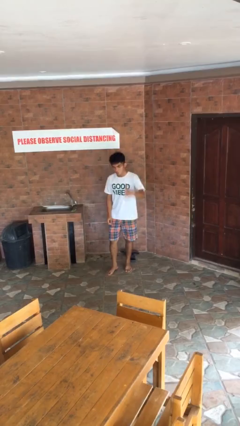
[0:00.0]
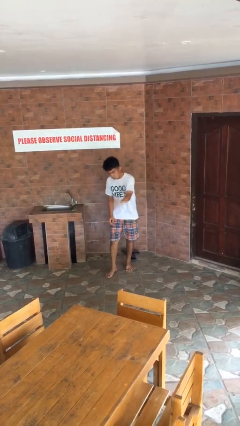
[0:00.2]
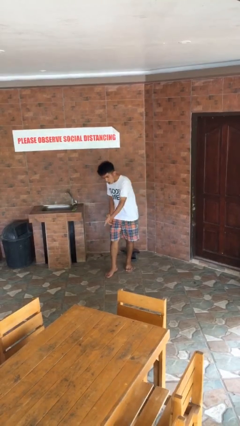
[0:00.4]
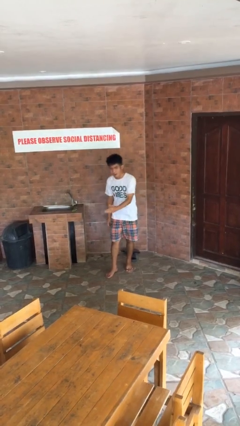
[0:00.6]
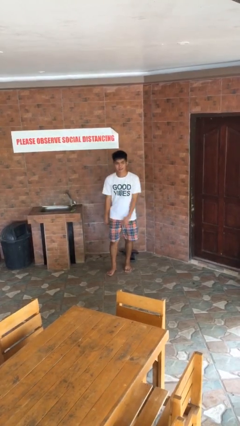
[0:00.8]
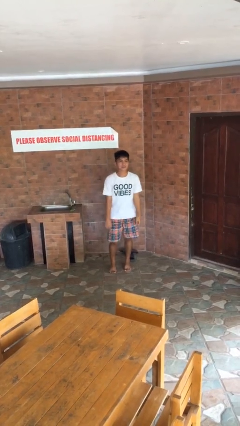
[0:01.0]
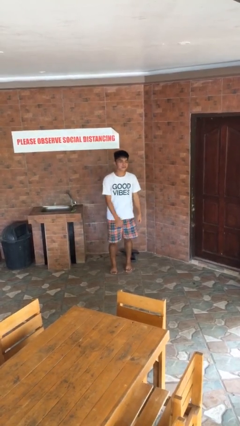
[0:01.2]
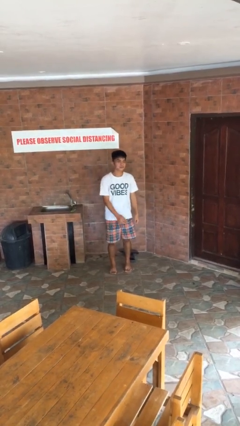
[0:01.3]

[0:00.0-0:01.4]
person karate chop

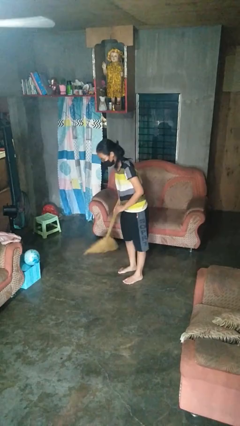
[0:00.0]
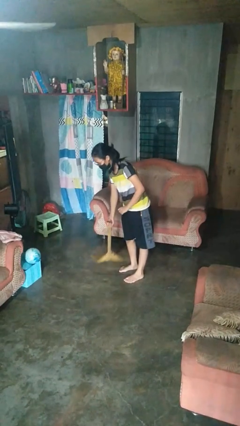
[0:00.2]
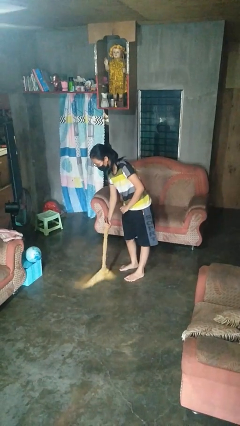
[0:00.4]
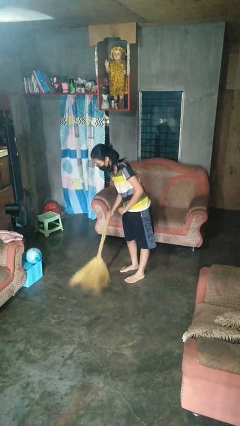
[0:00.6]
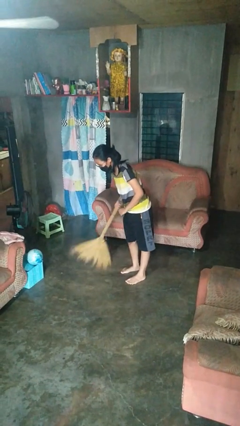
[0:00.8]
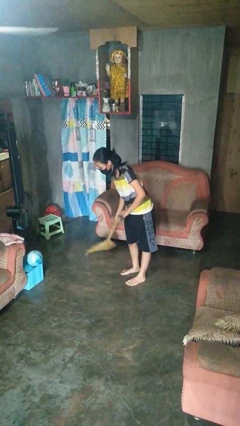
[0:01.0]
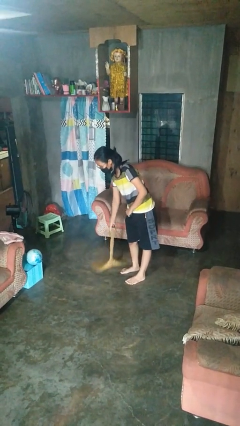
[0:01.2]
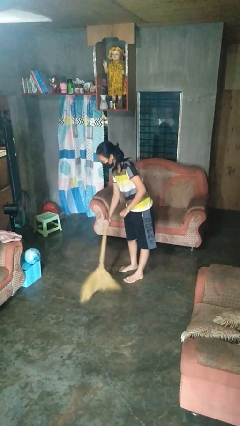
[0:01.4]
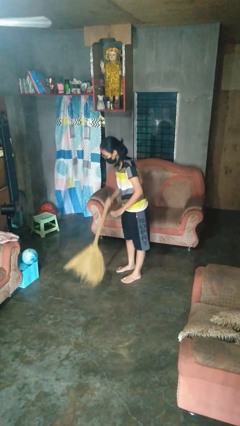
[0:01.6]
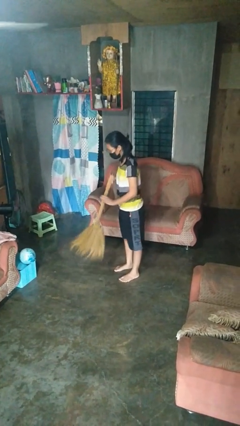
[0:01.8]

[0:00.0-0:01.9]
person sweeps floor

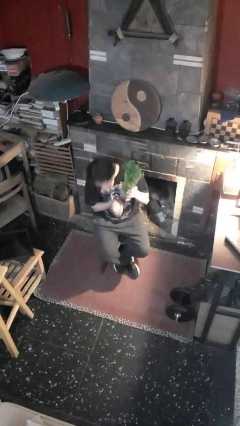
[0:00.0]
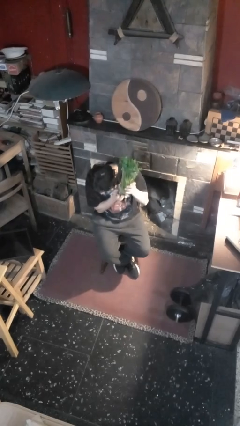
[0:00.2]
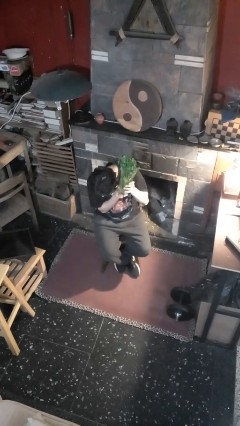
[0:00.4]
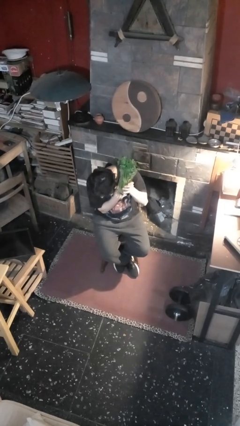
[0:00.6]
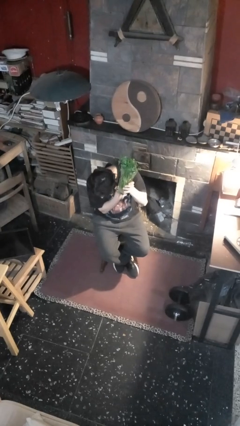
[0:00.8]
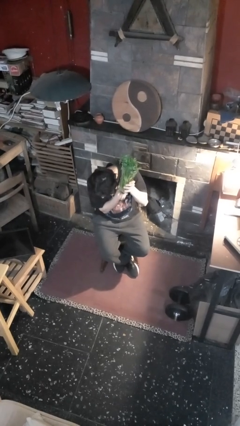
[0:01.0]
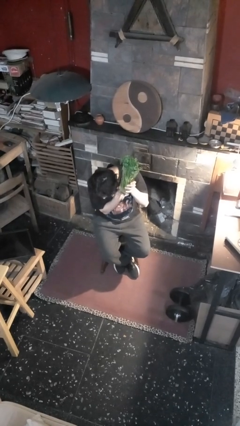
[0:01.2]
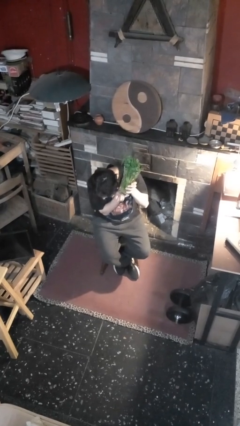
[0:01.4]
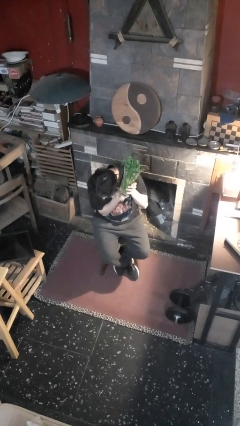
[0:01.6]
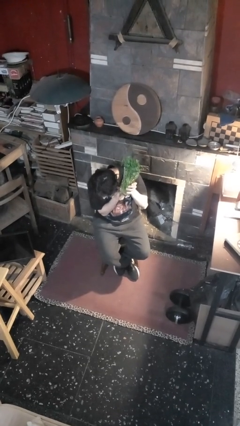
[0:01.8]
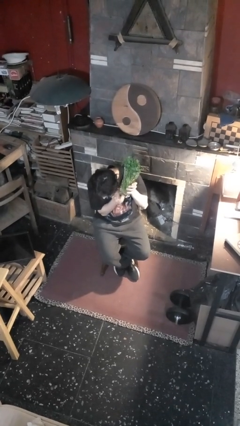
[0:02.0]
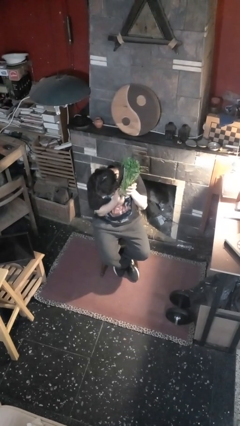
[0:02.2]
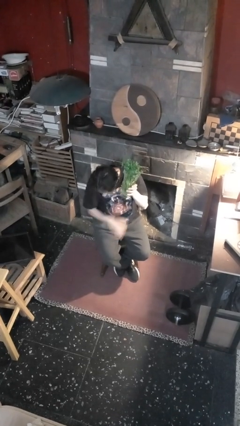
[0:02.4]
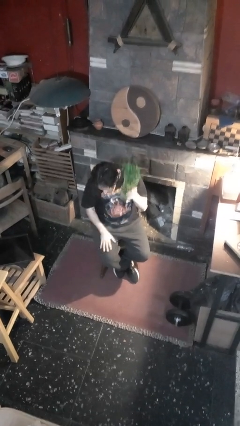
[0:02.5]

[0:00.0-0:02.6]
person taps object with finger

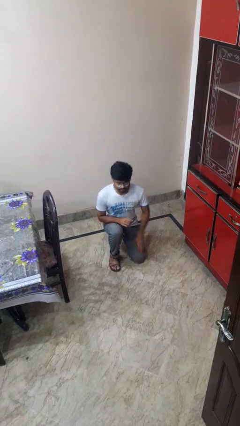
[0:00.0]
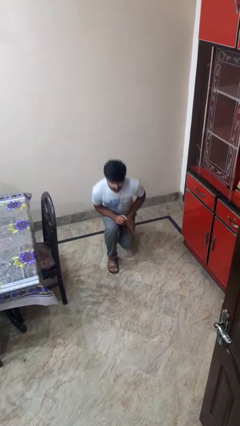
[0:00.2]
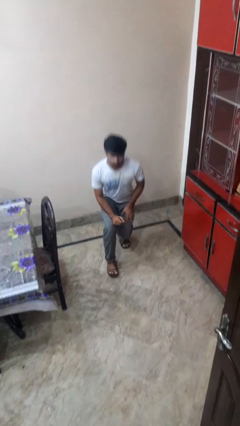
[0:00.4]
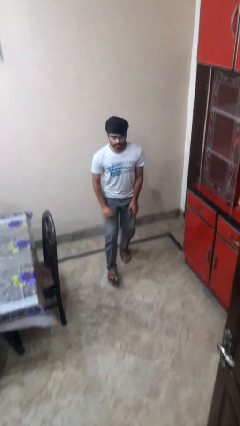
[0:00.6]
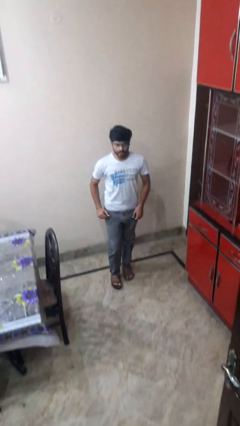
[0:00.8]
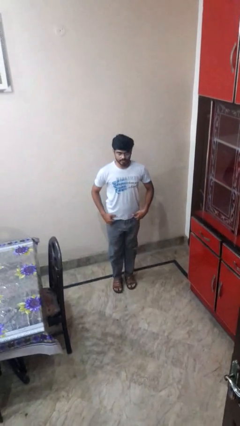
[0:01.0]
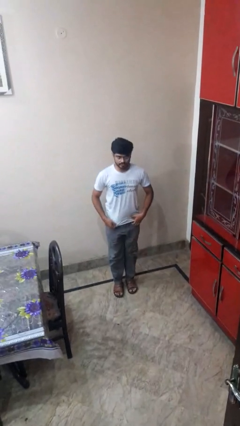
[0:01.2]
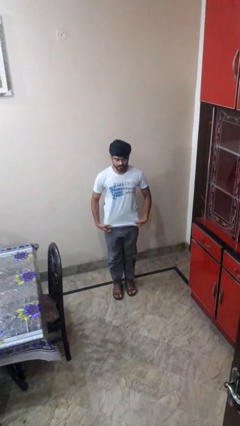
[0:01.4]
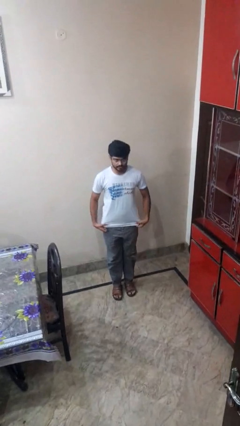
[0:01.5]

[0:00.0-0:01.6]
person stands up from floor

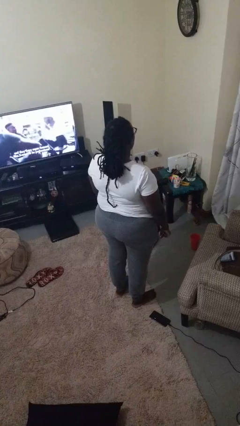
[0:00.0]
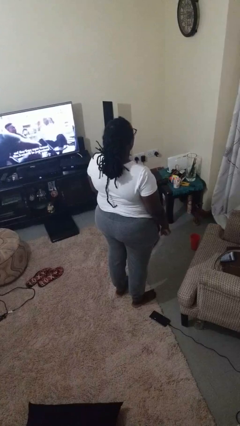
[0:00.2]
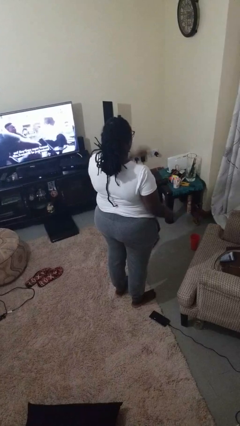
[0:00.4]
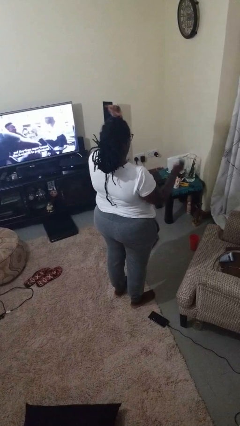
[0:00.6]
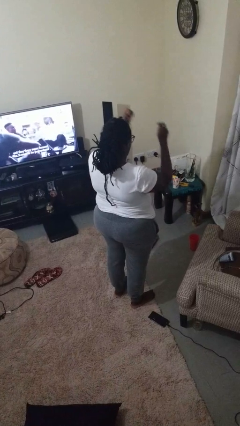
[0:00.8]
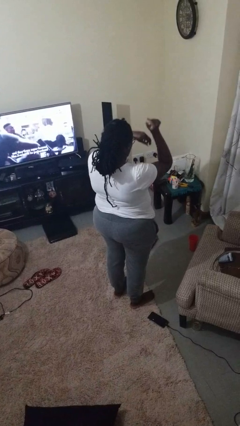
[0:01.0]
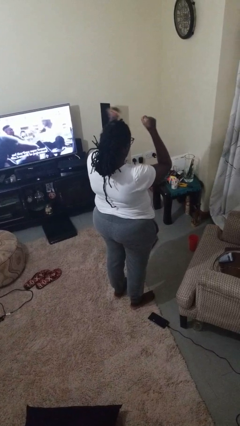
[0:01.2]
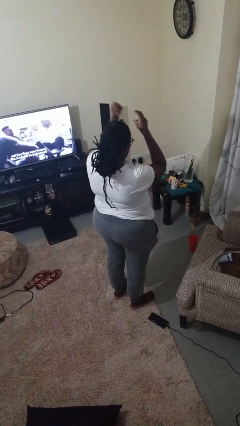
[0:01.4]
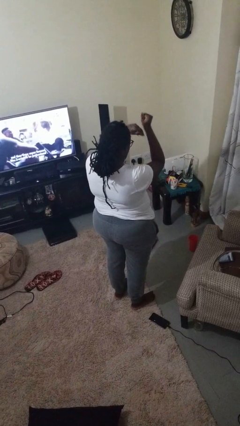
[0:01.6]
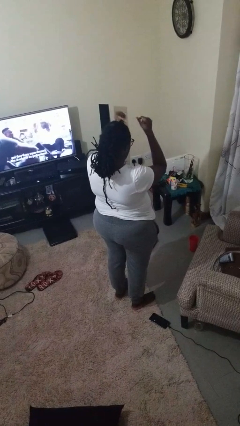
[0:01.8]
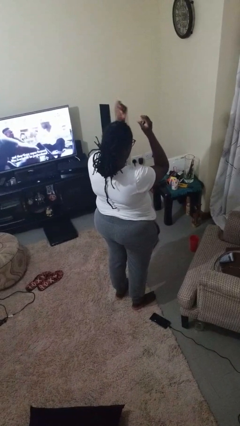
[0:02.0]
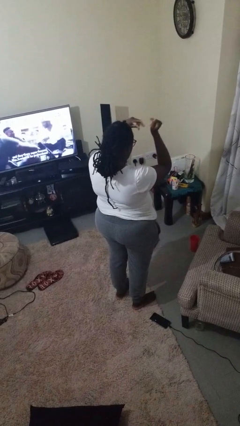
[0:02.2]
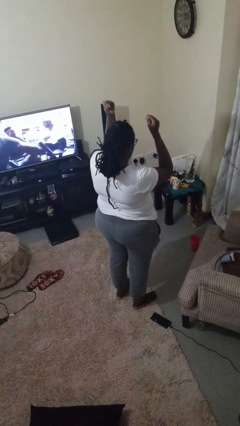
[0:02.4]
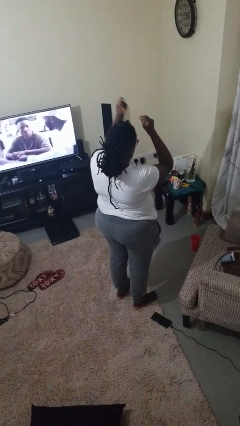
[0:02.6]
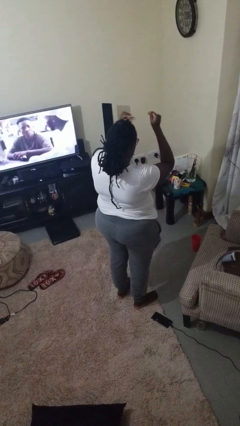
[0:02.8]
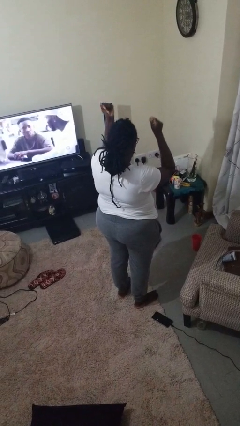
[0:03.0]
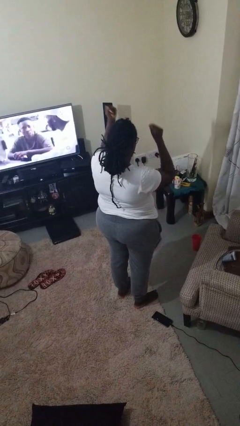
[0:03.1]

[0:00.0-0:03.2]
person snaps fingers

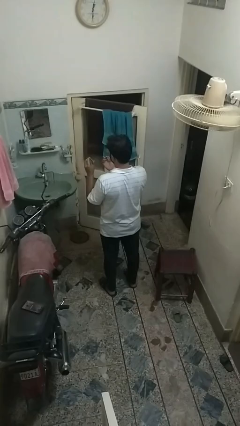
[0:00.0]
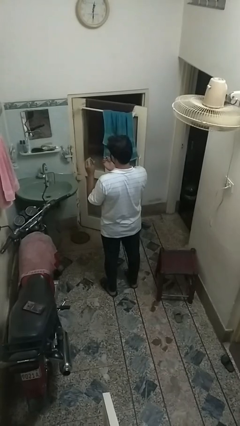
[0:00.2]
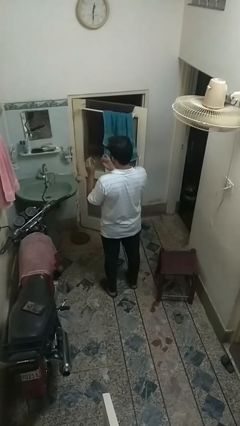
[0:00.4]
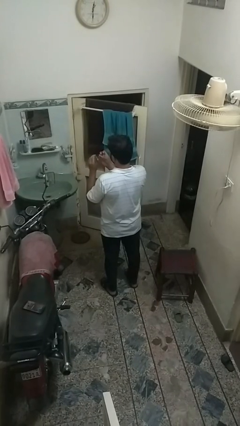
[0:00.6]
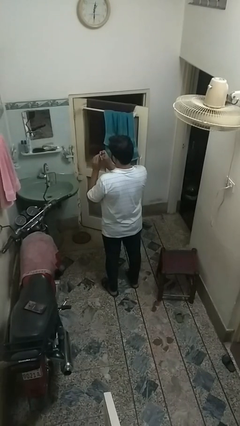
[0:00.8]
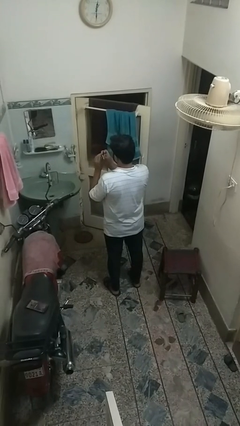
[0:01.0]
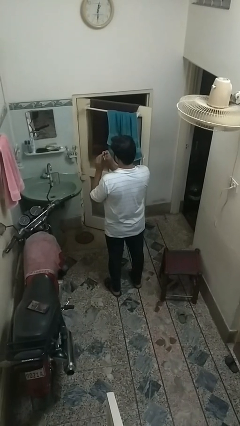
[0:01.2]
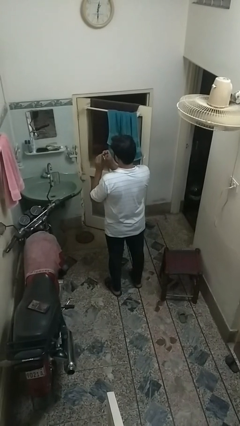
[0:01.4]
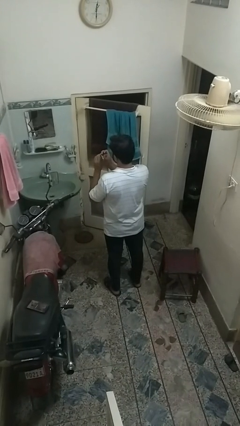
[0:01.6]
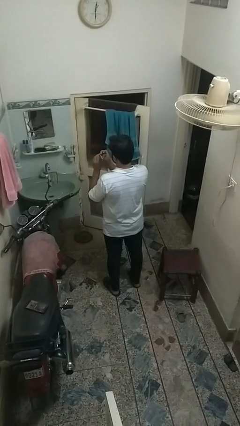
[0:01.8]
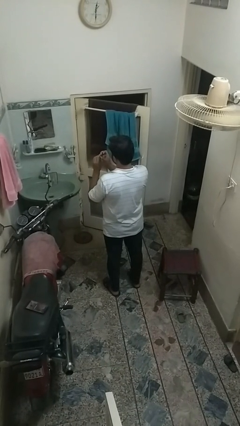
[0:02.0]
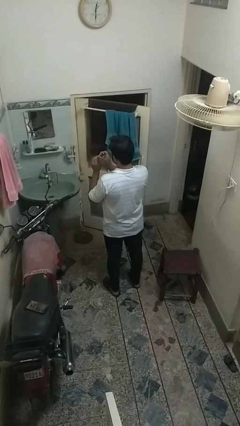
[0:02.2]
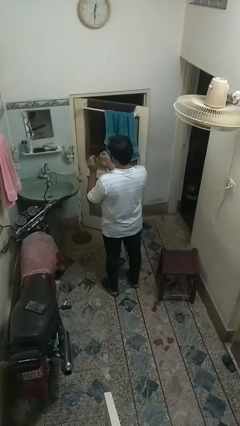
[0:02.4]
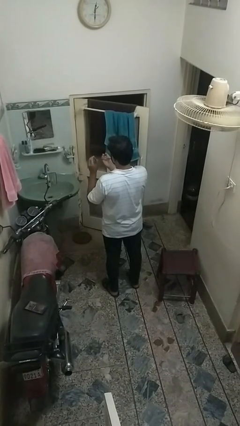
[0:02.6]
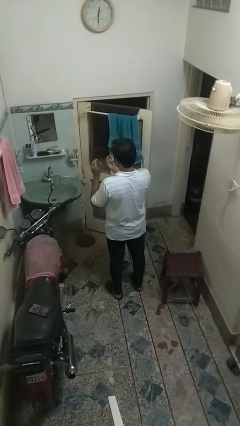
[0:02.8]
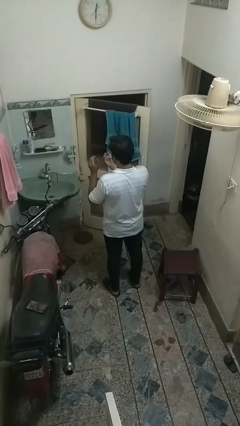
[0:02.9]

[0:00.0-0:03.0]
person clips fingernails

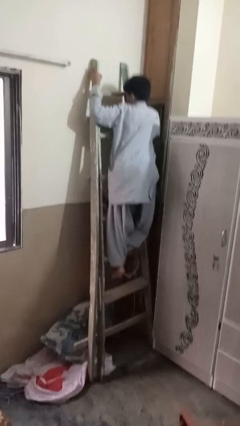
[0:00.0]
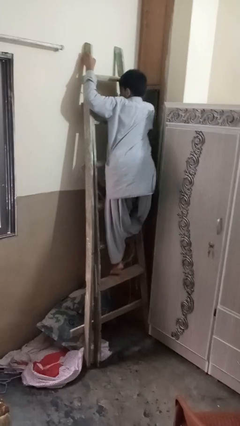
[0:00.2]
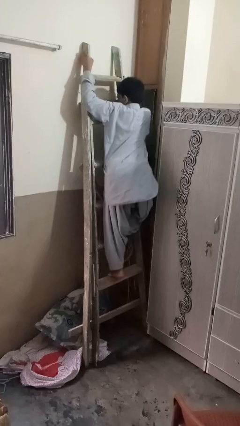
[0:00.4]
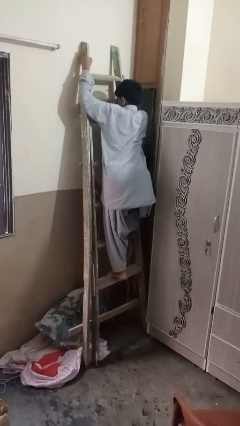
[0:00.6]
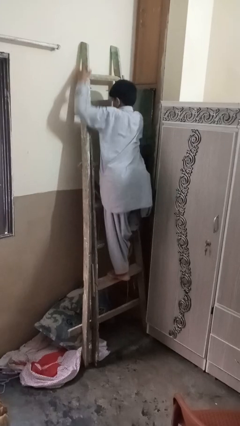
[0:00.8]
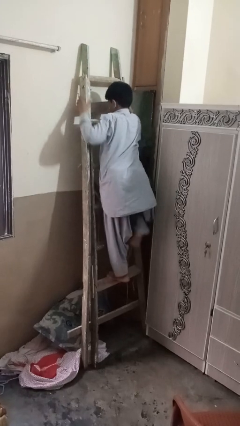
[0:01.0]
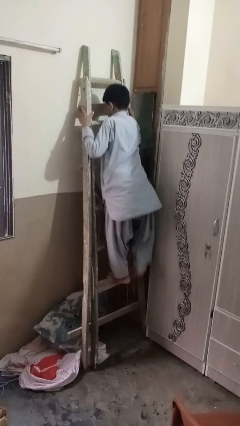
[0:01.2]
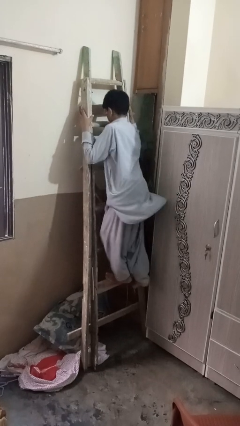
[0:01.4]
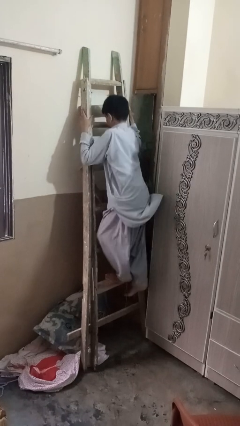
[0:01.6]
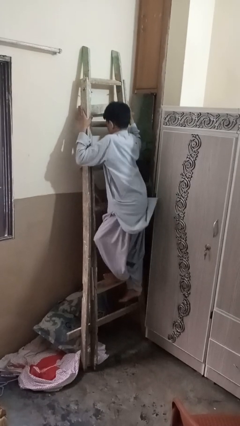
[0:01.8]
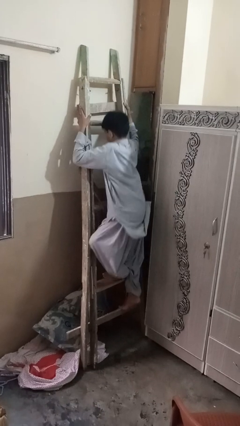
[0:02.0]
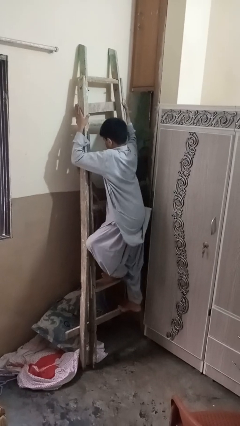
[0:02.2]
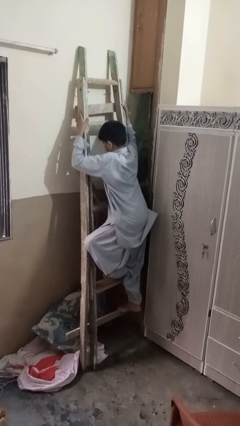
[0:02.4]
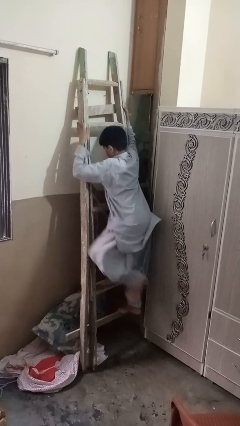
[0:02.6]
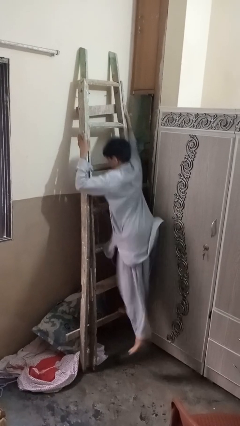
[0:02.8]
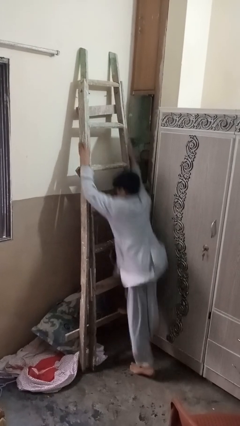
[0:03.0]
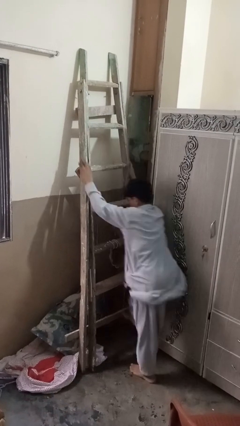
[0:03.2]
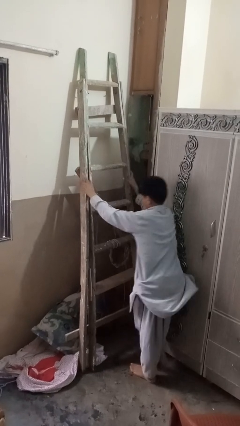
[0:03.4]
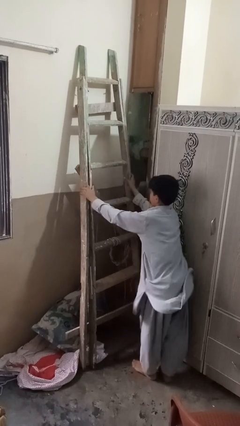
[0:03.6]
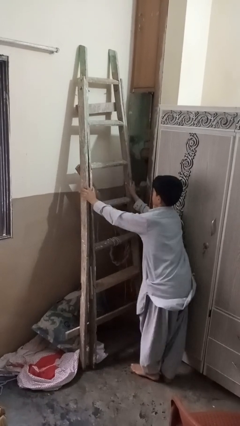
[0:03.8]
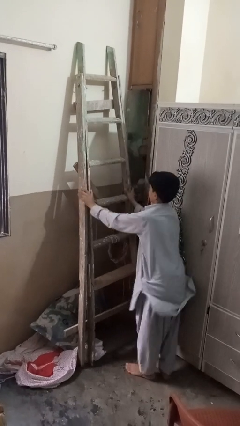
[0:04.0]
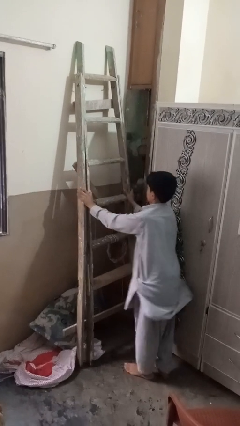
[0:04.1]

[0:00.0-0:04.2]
person climbs down ladder
